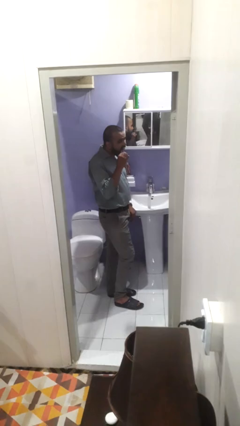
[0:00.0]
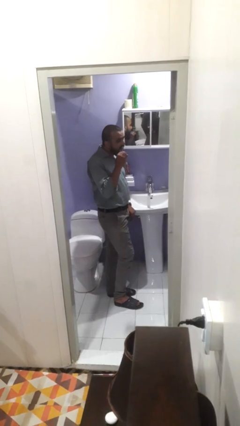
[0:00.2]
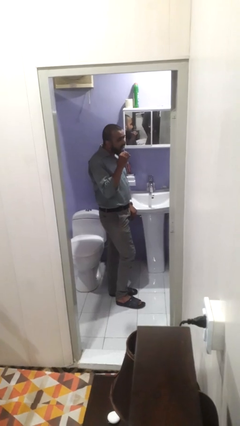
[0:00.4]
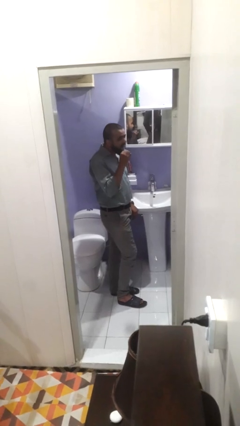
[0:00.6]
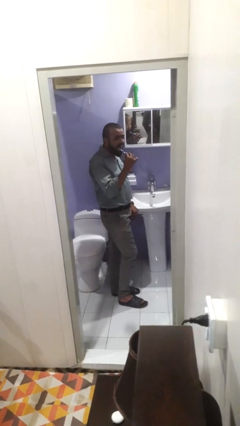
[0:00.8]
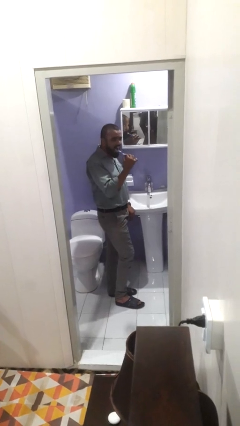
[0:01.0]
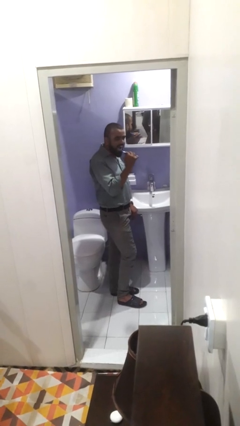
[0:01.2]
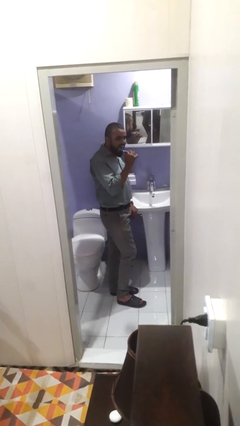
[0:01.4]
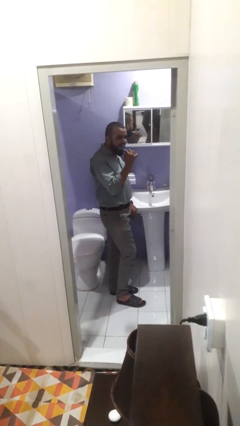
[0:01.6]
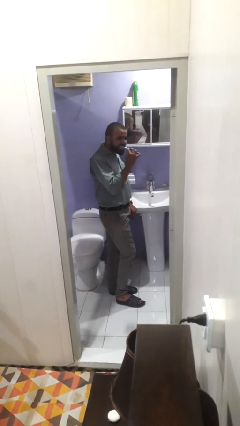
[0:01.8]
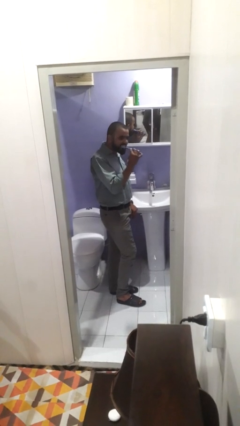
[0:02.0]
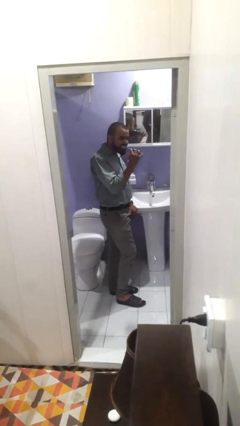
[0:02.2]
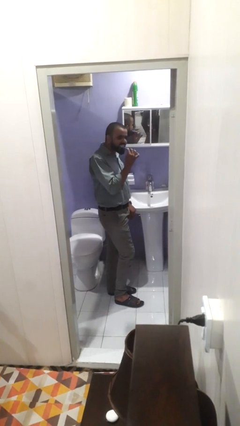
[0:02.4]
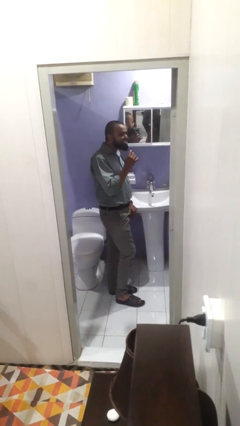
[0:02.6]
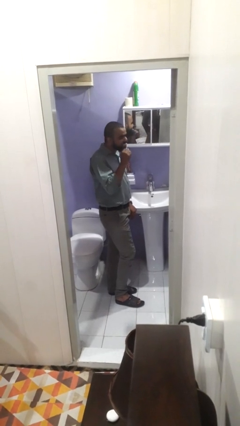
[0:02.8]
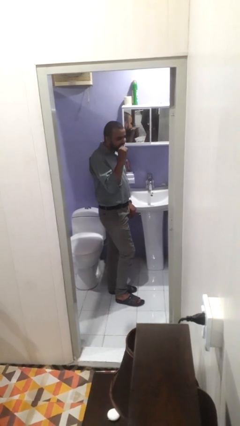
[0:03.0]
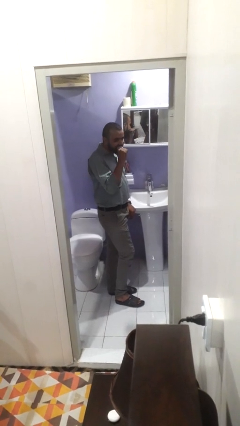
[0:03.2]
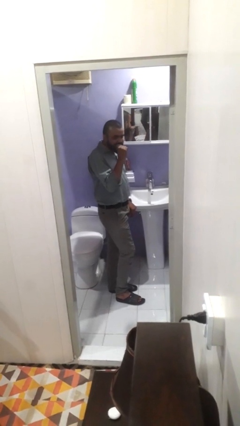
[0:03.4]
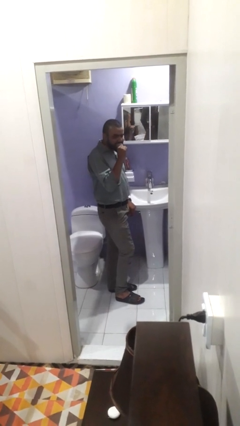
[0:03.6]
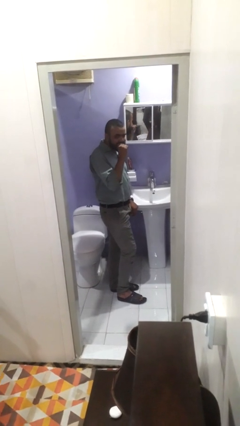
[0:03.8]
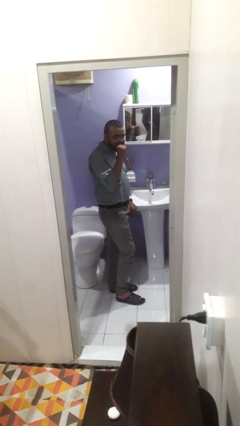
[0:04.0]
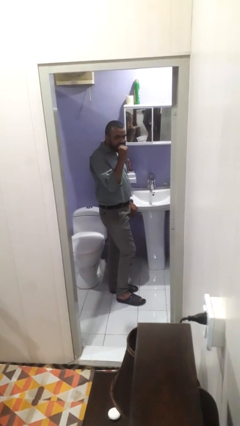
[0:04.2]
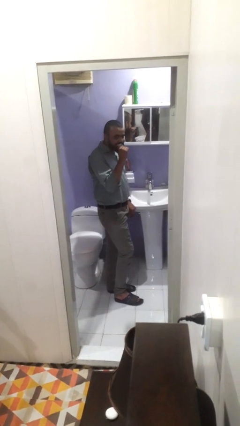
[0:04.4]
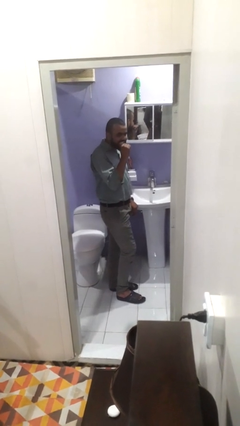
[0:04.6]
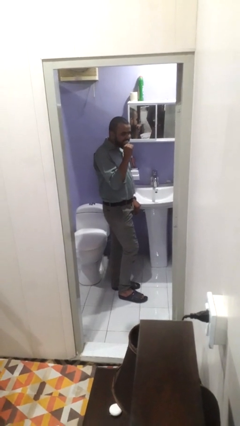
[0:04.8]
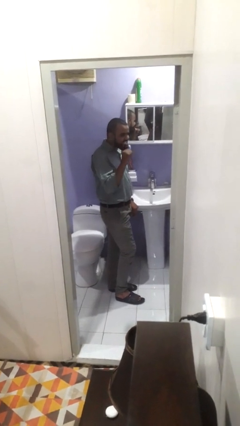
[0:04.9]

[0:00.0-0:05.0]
person brushes teeth

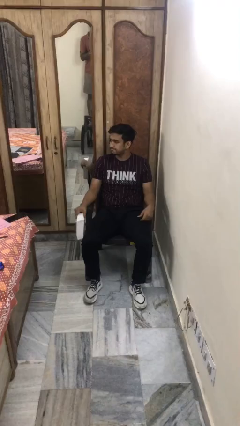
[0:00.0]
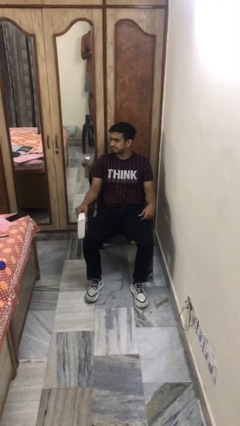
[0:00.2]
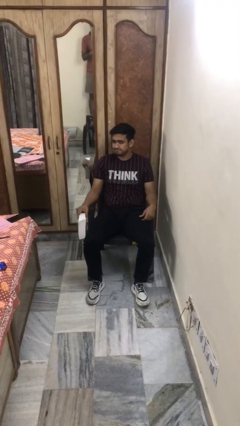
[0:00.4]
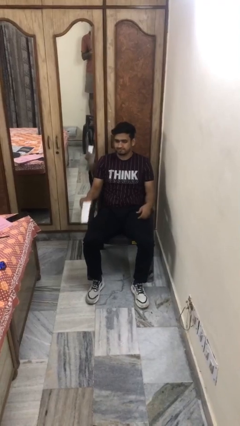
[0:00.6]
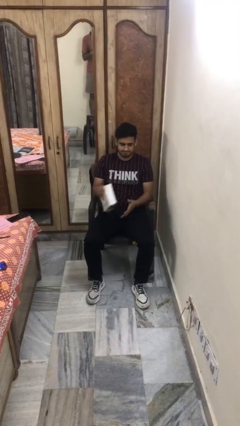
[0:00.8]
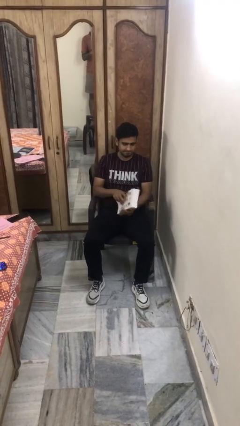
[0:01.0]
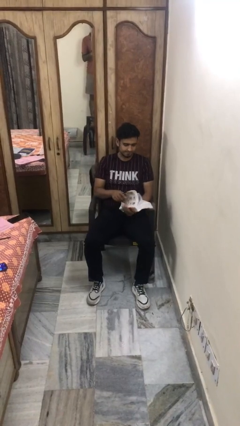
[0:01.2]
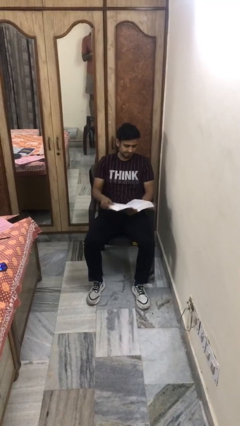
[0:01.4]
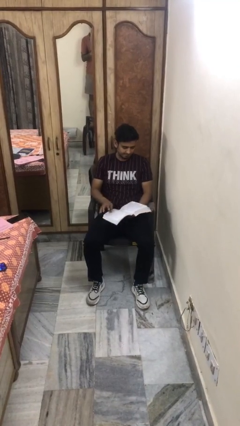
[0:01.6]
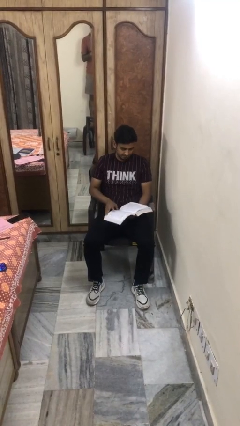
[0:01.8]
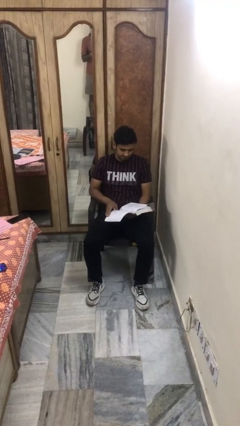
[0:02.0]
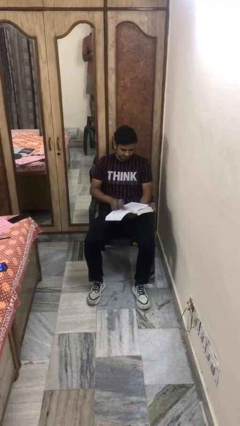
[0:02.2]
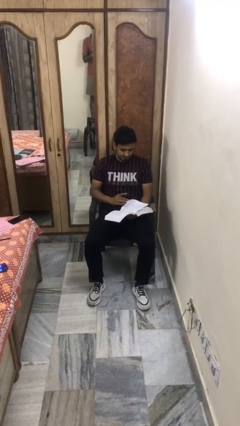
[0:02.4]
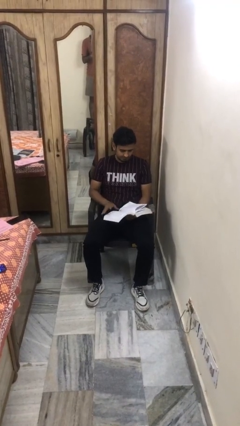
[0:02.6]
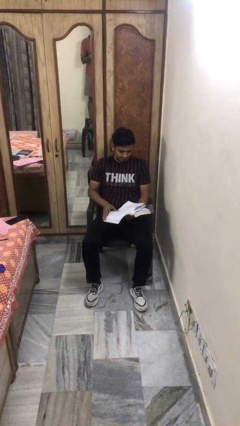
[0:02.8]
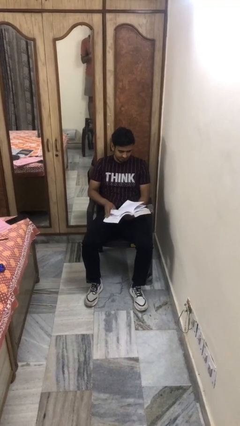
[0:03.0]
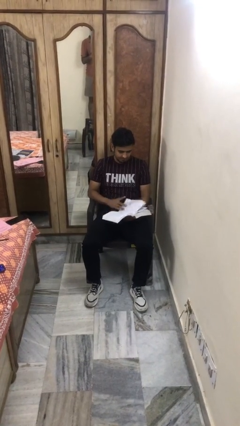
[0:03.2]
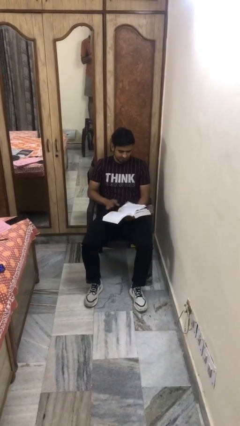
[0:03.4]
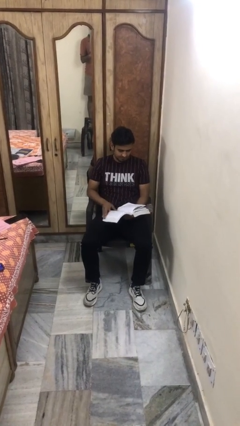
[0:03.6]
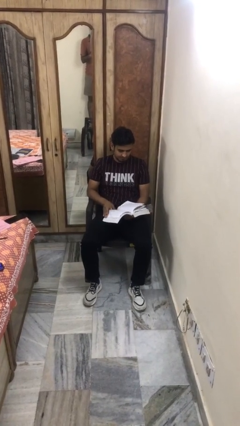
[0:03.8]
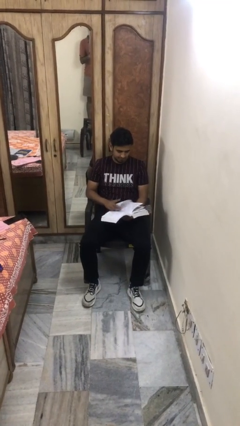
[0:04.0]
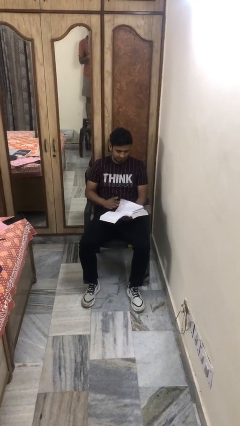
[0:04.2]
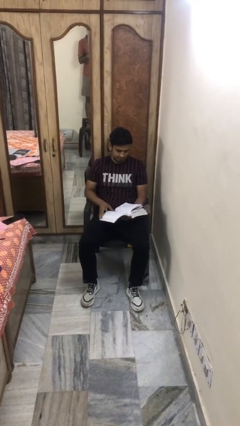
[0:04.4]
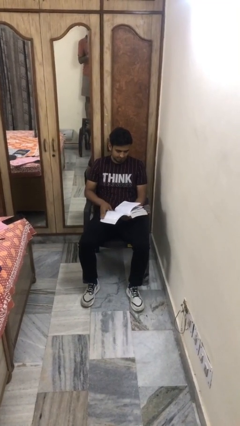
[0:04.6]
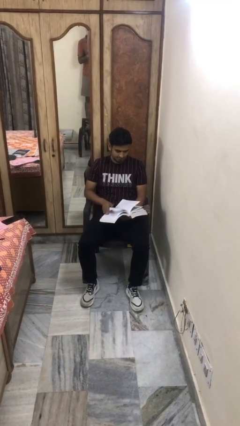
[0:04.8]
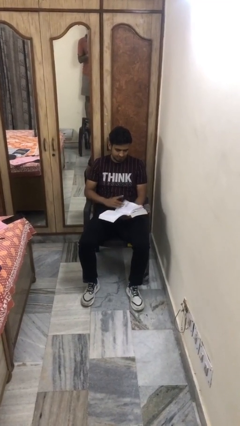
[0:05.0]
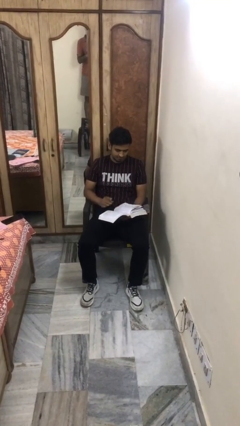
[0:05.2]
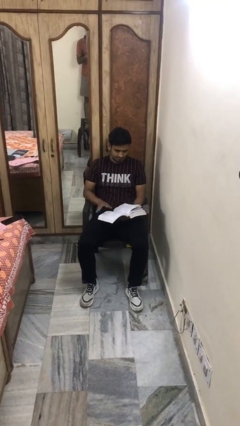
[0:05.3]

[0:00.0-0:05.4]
person reads book

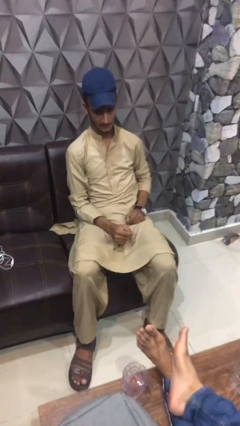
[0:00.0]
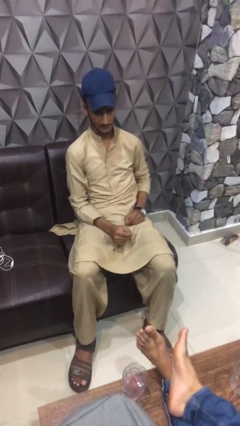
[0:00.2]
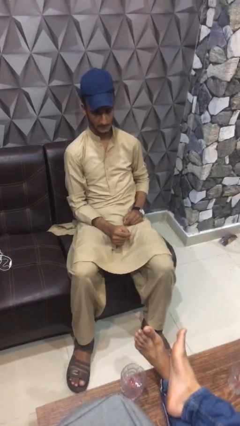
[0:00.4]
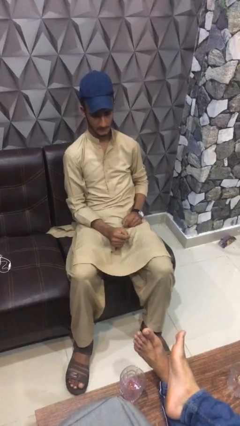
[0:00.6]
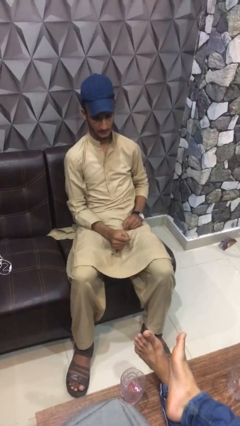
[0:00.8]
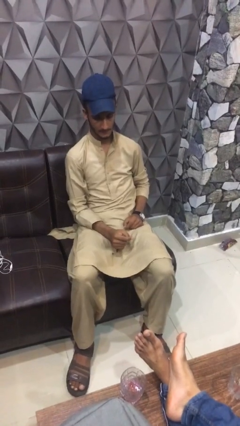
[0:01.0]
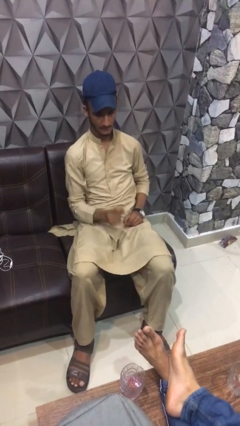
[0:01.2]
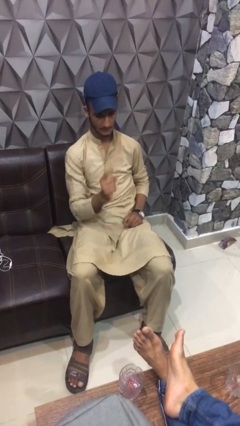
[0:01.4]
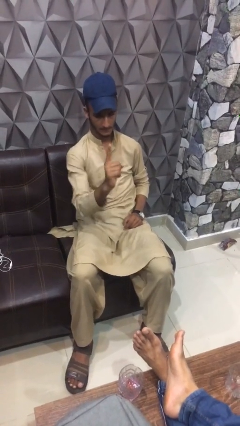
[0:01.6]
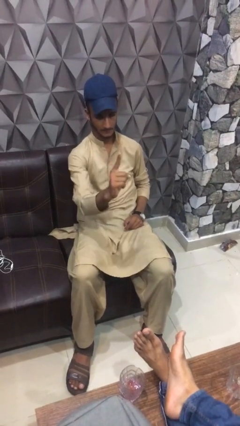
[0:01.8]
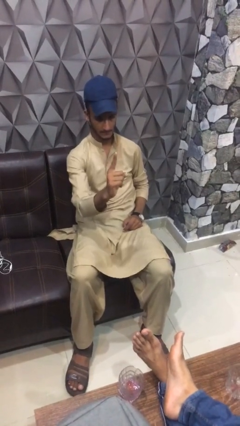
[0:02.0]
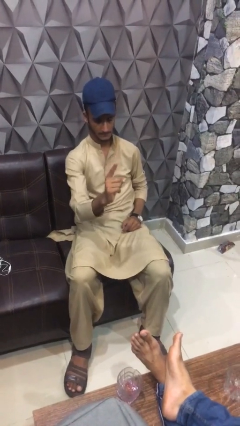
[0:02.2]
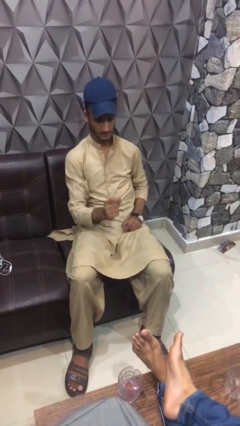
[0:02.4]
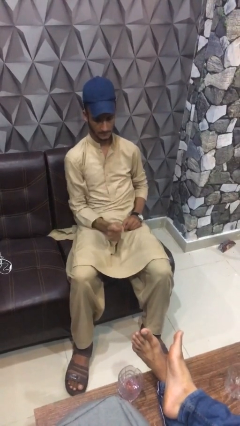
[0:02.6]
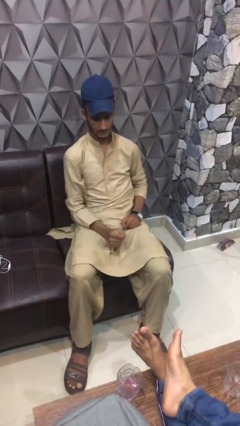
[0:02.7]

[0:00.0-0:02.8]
person gestures number one

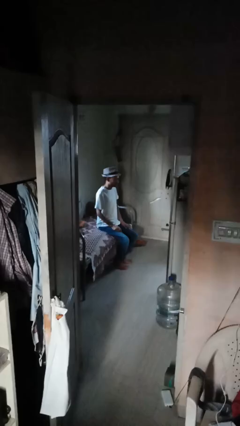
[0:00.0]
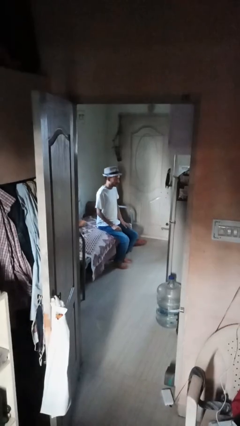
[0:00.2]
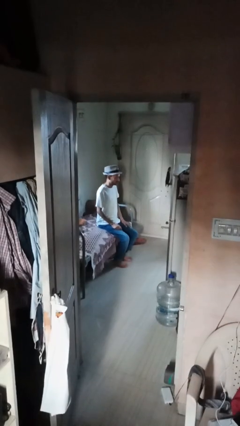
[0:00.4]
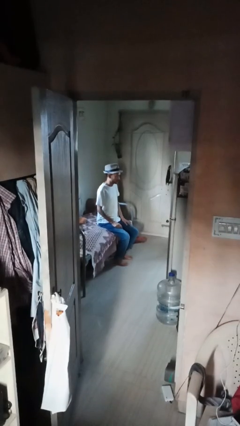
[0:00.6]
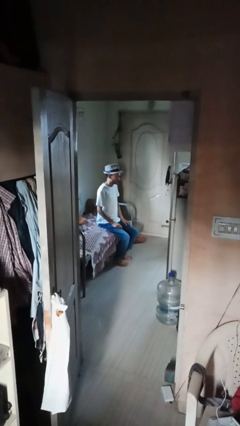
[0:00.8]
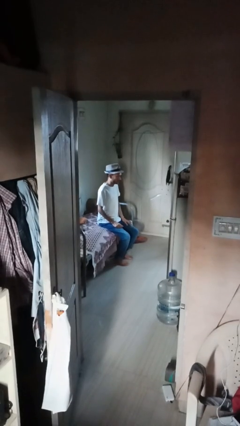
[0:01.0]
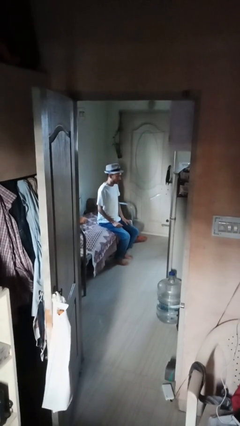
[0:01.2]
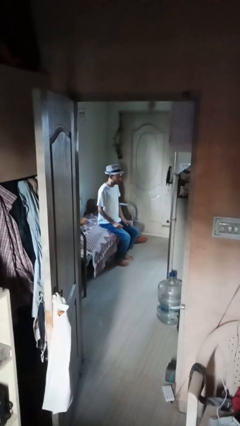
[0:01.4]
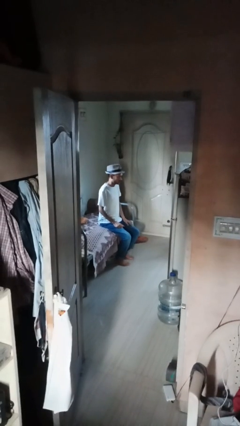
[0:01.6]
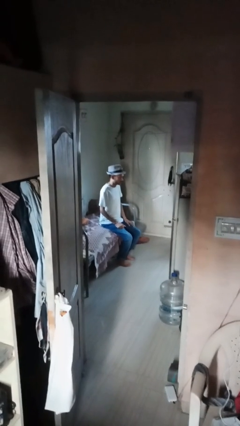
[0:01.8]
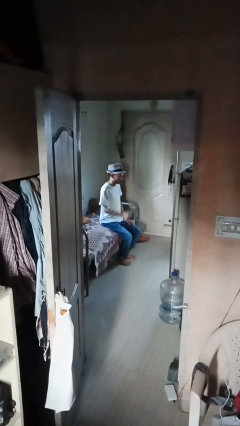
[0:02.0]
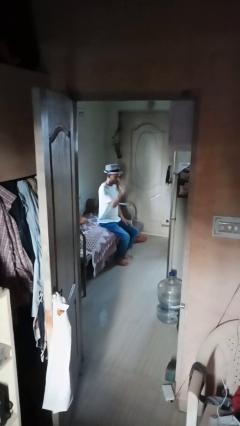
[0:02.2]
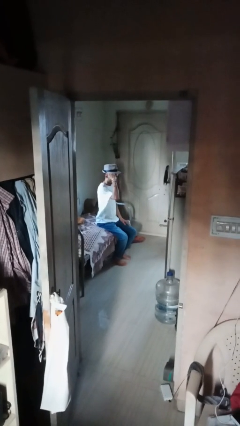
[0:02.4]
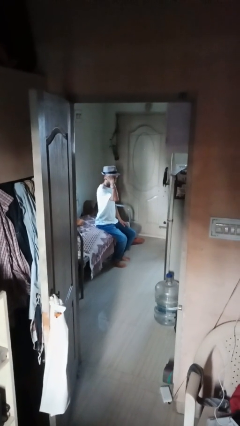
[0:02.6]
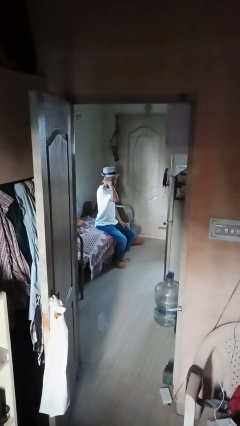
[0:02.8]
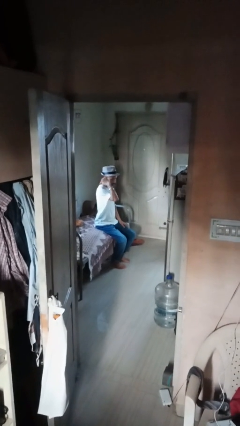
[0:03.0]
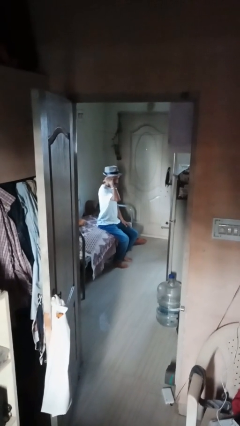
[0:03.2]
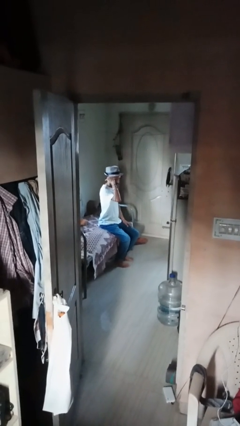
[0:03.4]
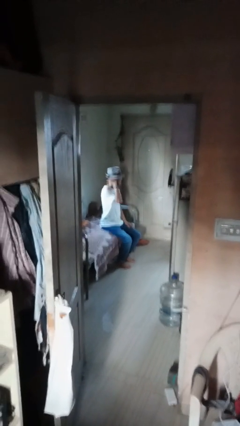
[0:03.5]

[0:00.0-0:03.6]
person gestures behind me

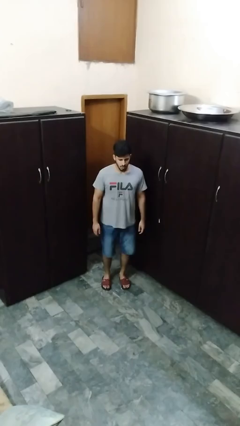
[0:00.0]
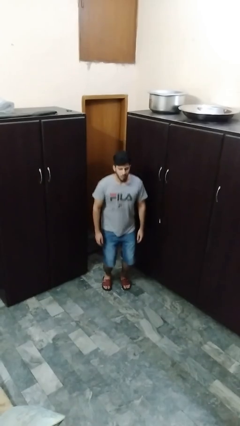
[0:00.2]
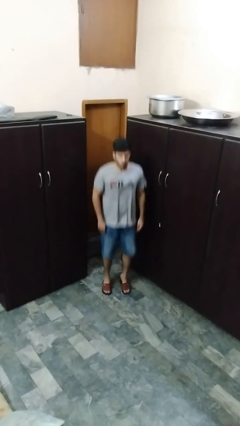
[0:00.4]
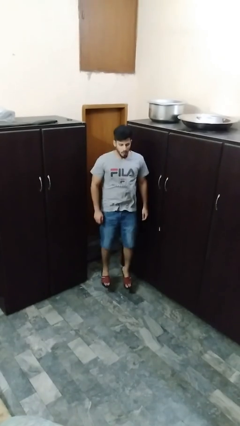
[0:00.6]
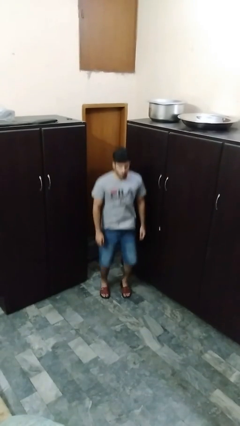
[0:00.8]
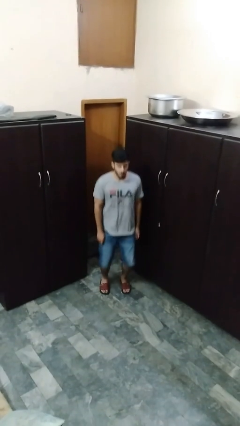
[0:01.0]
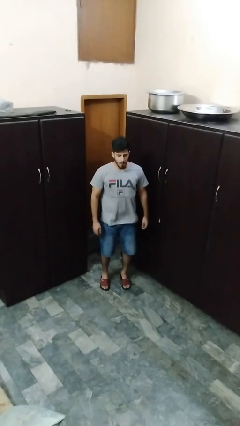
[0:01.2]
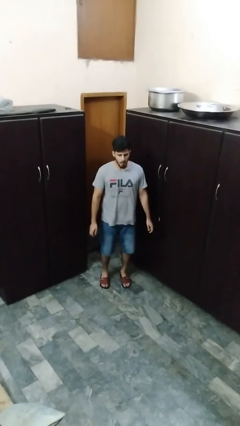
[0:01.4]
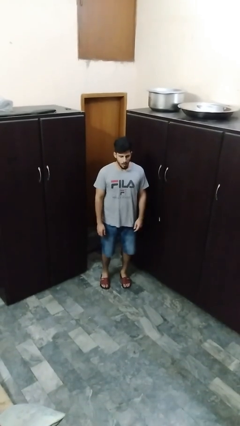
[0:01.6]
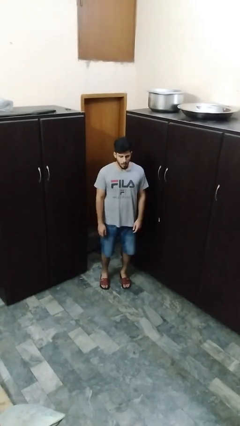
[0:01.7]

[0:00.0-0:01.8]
person jumps
